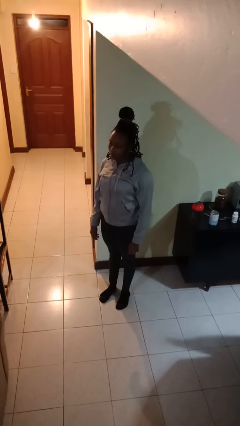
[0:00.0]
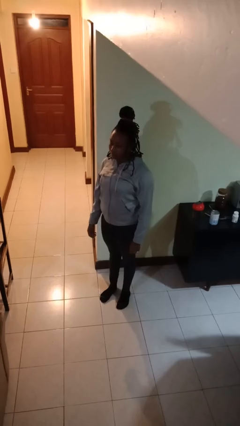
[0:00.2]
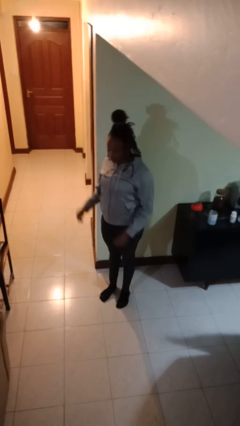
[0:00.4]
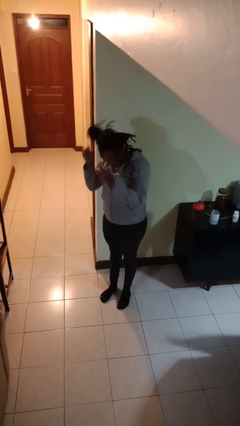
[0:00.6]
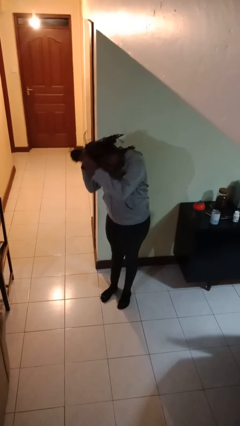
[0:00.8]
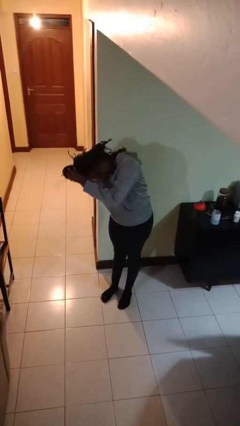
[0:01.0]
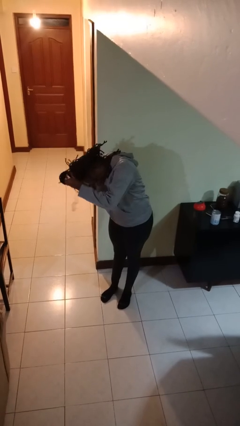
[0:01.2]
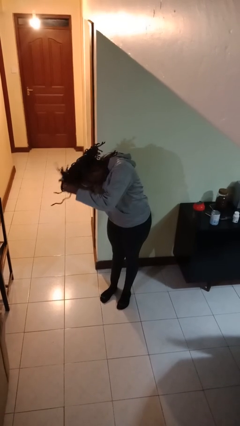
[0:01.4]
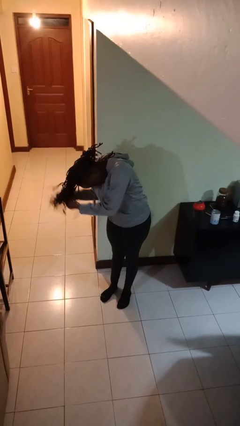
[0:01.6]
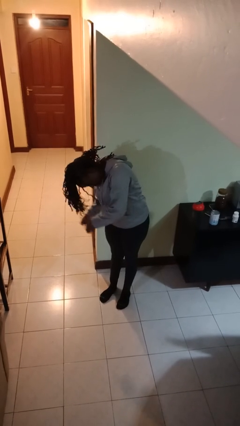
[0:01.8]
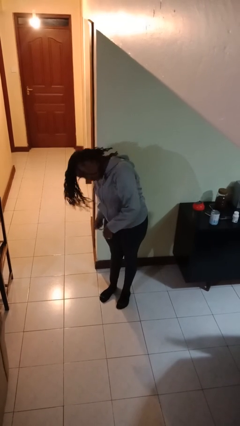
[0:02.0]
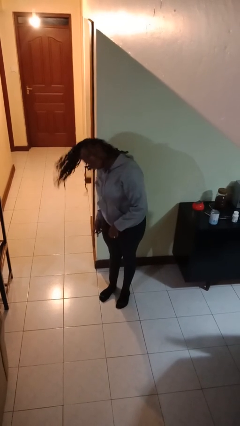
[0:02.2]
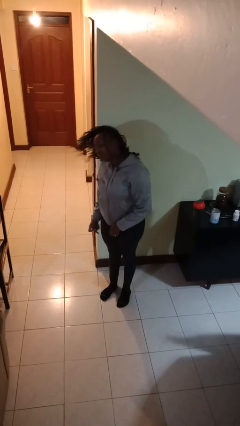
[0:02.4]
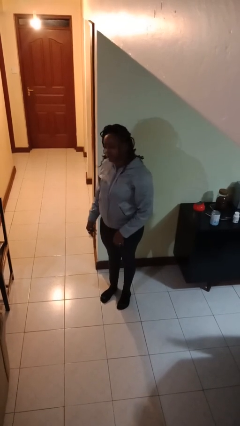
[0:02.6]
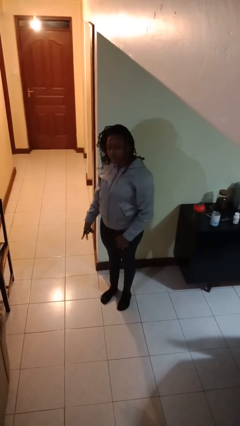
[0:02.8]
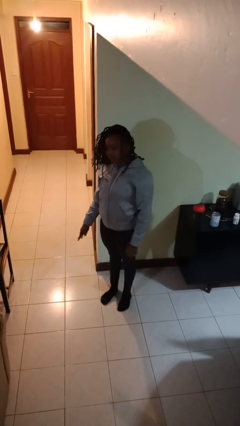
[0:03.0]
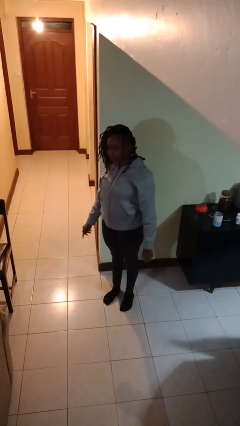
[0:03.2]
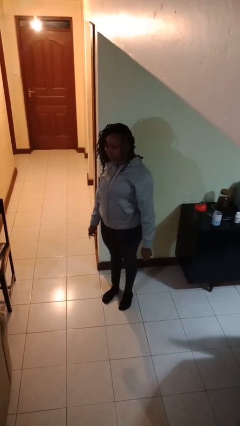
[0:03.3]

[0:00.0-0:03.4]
person takes off hairtie

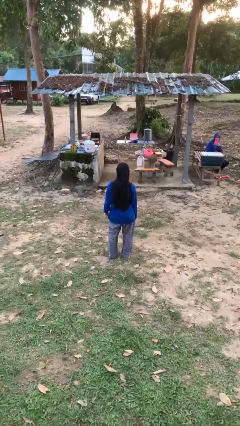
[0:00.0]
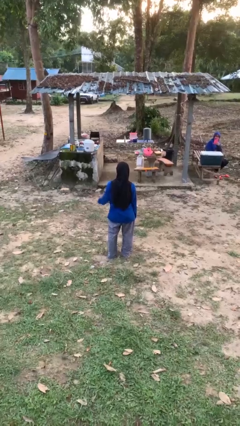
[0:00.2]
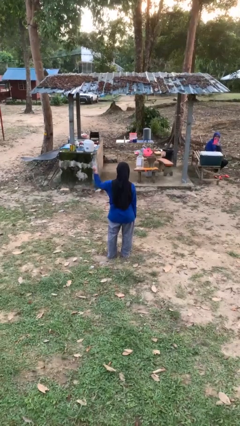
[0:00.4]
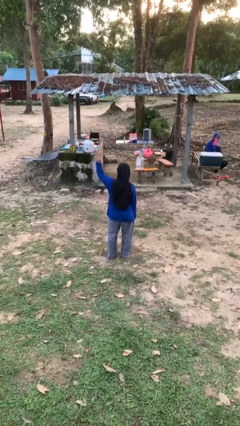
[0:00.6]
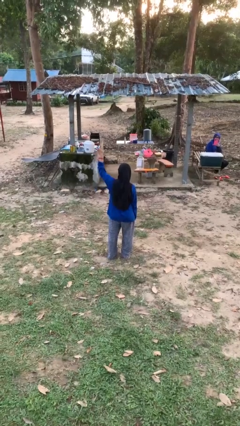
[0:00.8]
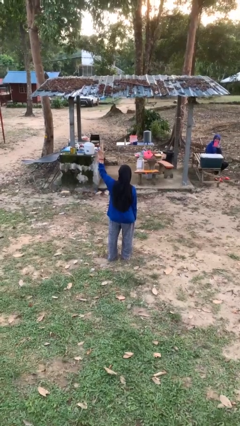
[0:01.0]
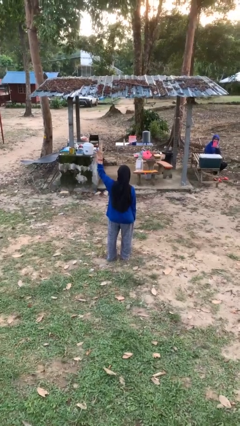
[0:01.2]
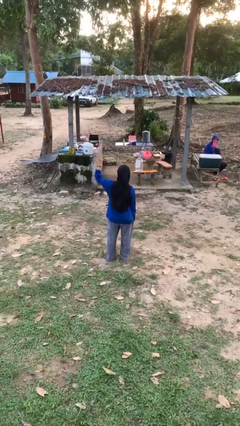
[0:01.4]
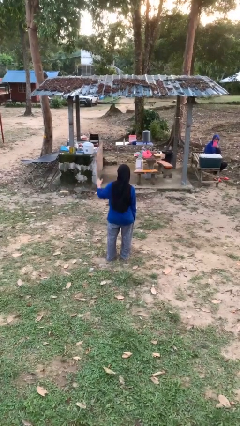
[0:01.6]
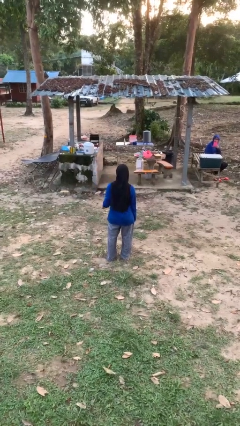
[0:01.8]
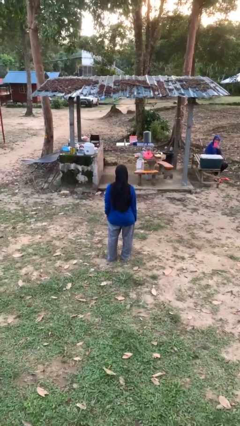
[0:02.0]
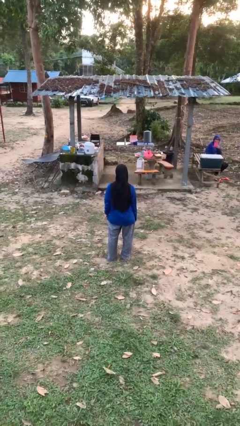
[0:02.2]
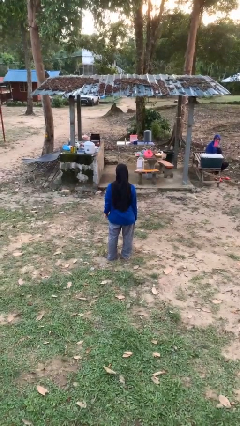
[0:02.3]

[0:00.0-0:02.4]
person gestures number five

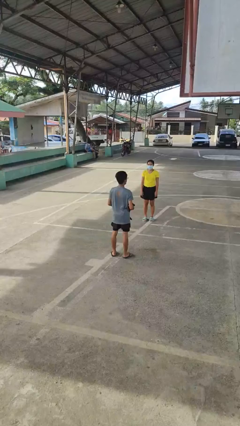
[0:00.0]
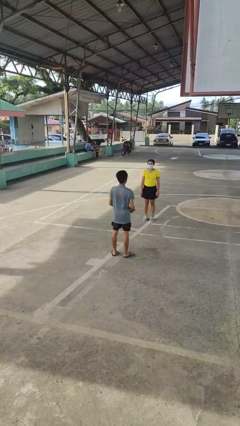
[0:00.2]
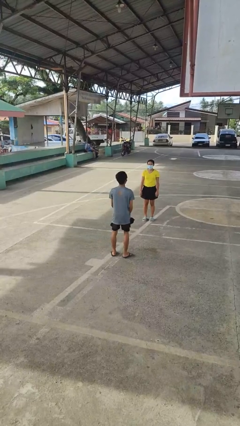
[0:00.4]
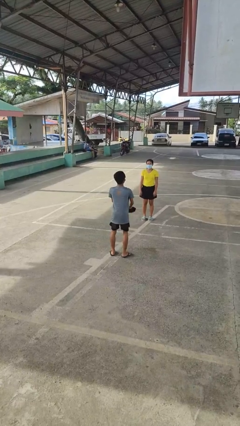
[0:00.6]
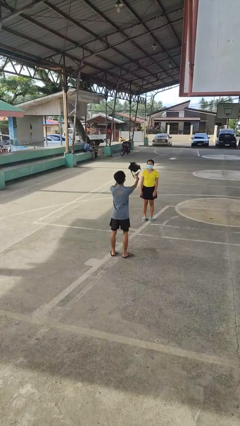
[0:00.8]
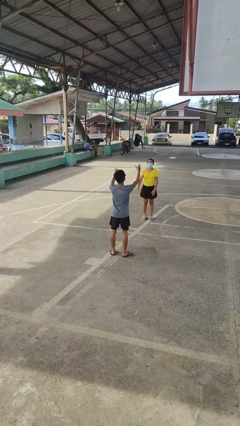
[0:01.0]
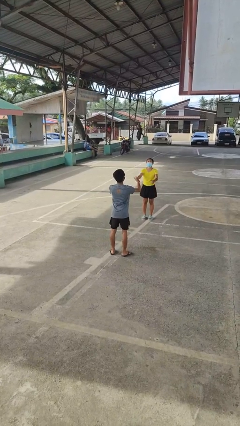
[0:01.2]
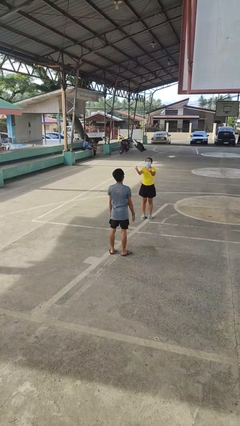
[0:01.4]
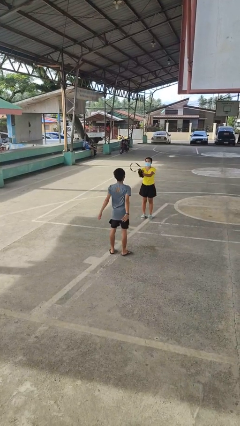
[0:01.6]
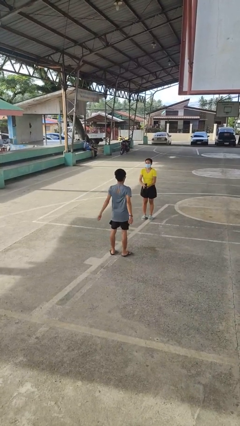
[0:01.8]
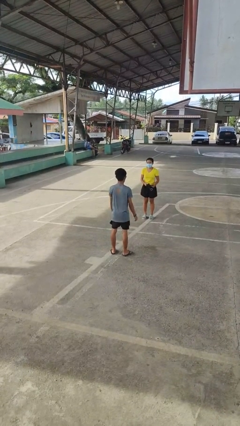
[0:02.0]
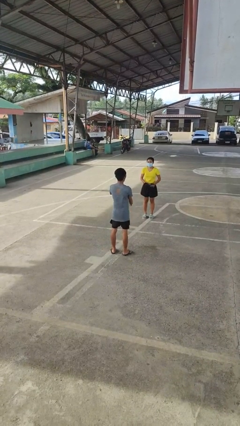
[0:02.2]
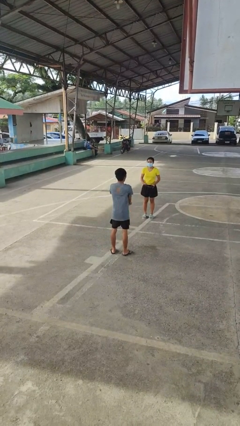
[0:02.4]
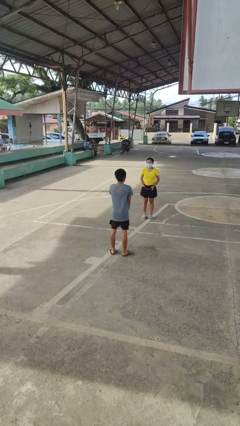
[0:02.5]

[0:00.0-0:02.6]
person throws object to person

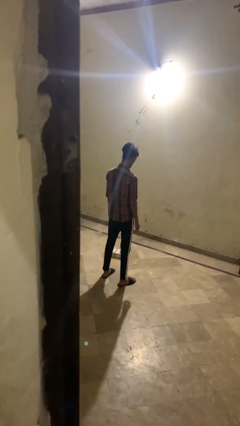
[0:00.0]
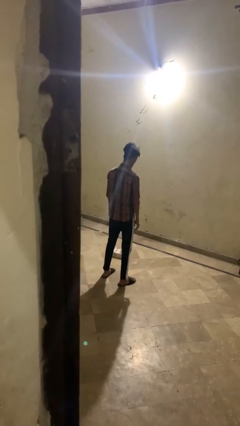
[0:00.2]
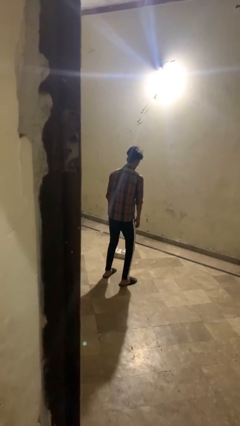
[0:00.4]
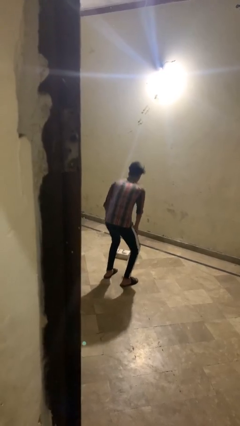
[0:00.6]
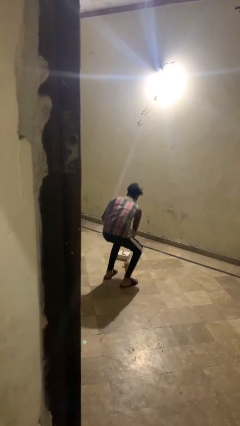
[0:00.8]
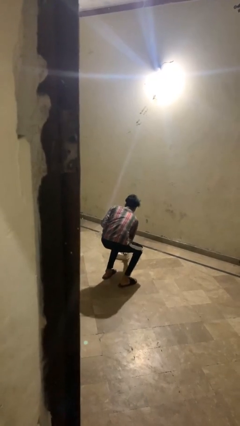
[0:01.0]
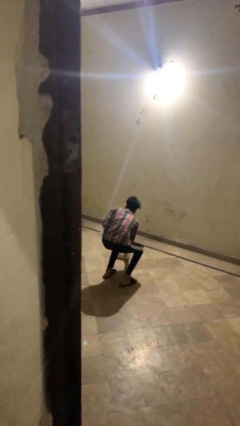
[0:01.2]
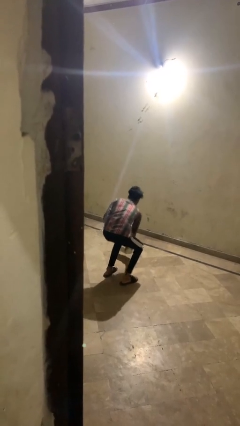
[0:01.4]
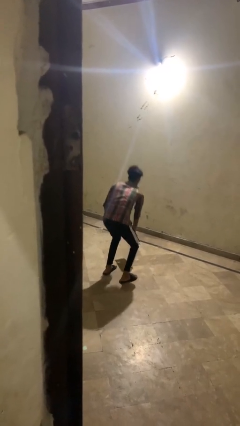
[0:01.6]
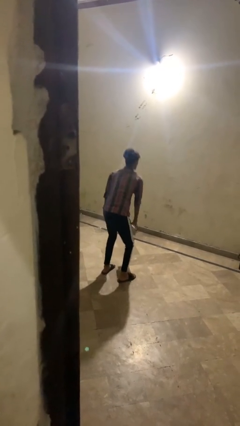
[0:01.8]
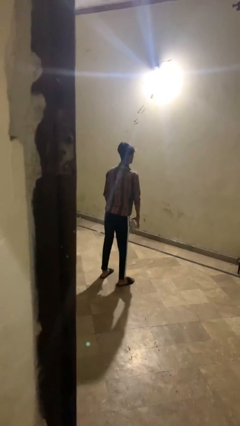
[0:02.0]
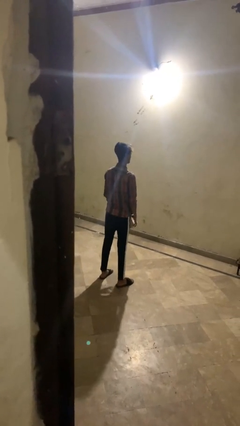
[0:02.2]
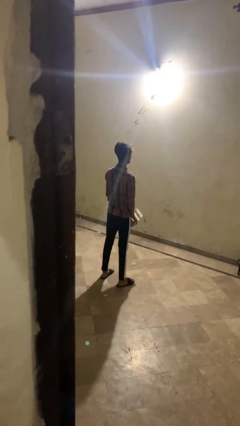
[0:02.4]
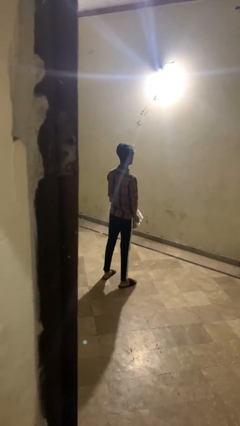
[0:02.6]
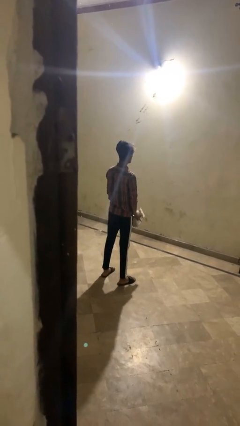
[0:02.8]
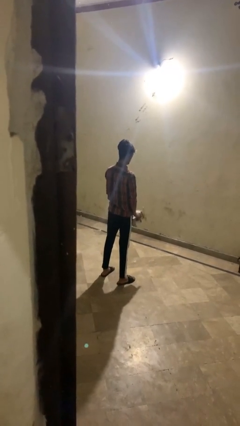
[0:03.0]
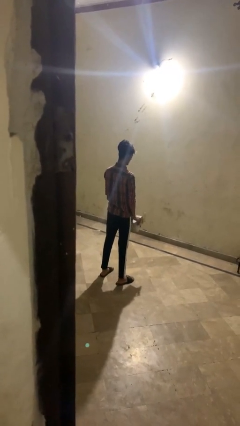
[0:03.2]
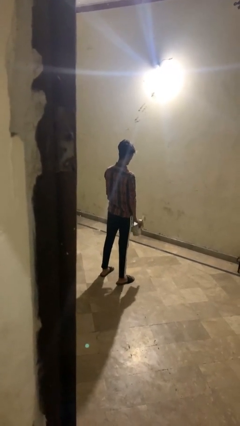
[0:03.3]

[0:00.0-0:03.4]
person picks up object from floor

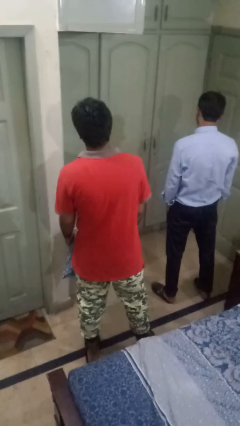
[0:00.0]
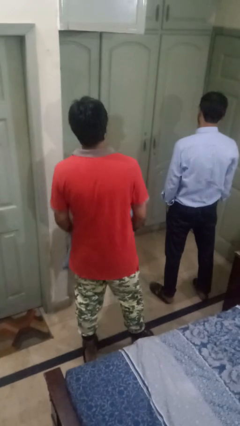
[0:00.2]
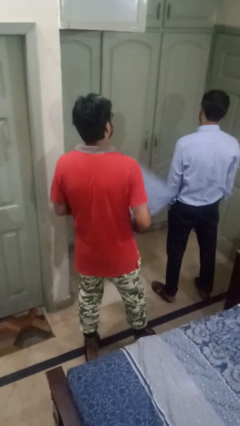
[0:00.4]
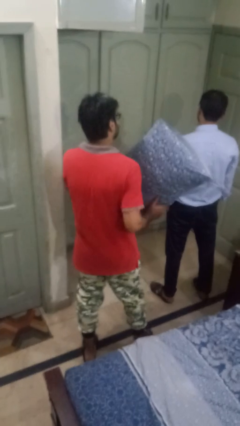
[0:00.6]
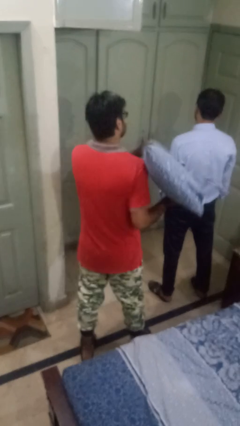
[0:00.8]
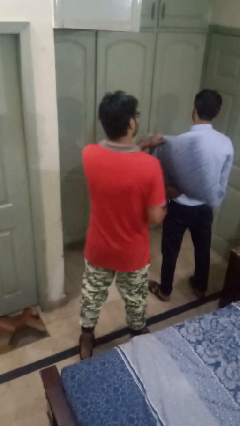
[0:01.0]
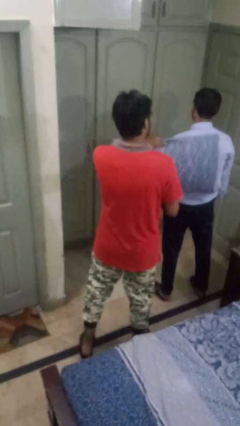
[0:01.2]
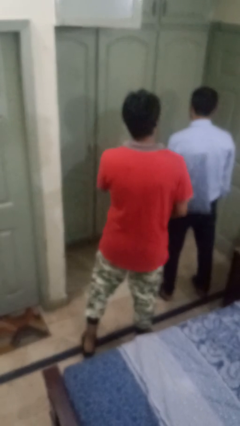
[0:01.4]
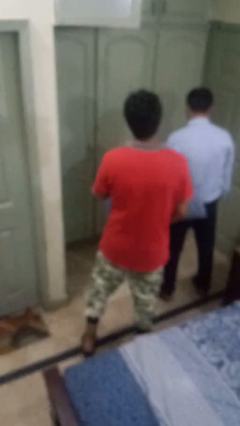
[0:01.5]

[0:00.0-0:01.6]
person hits person with pillow

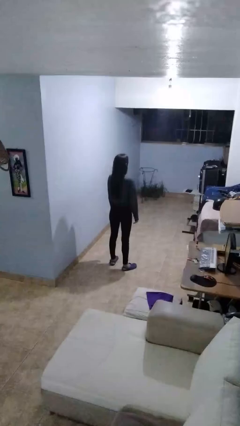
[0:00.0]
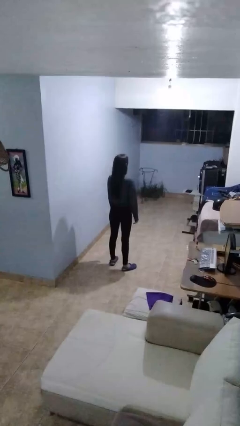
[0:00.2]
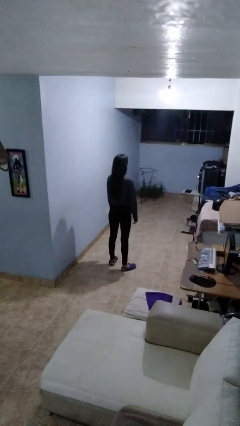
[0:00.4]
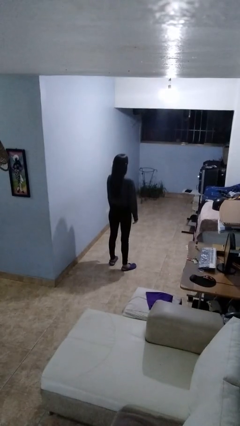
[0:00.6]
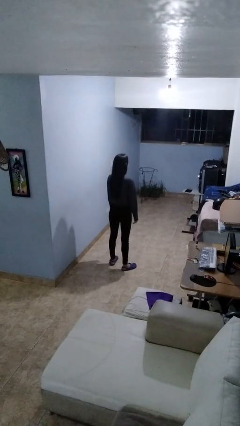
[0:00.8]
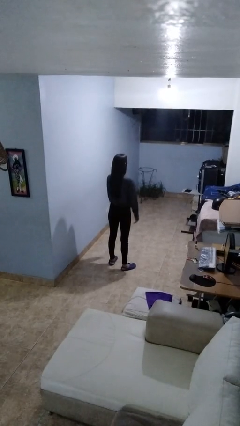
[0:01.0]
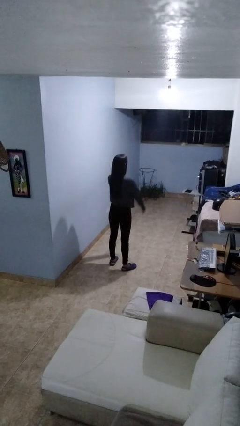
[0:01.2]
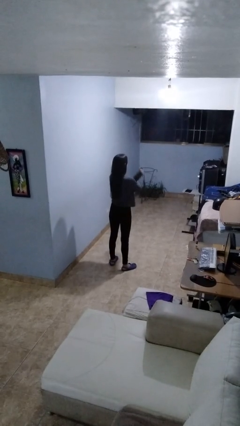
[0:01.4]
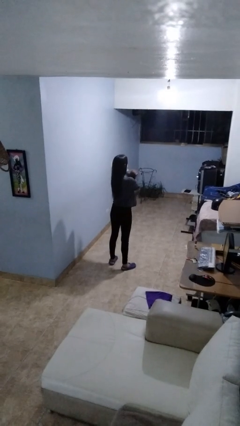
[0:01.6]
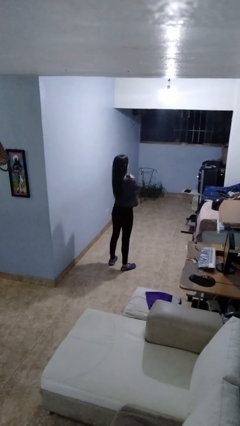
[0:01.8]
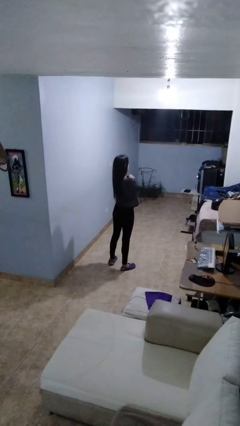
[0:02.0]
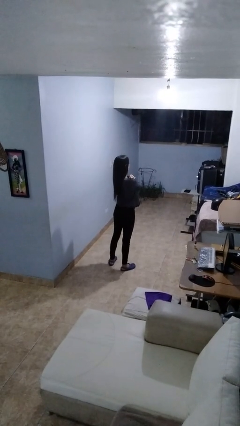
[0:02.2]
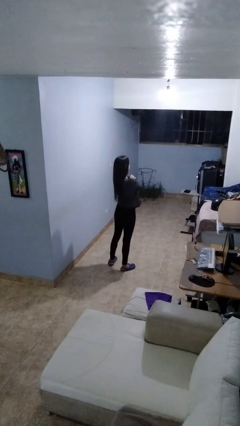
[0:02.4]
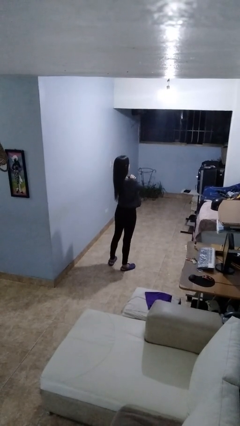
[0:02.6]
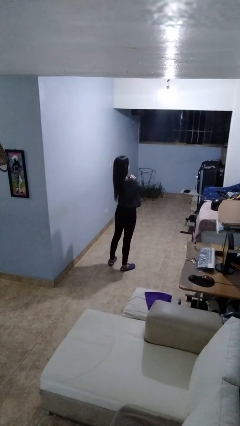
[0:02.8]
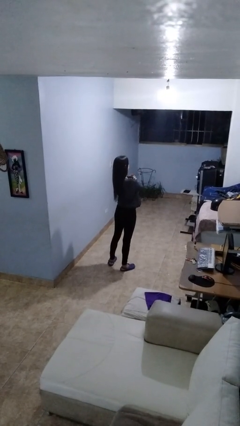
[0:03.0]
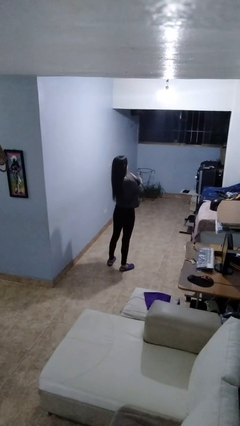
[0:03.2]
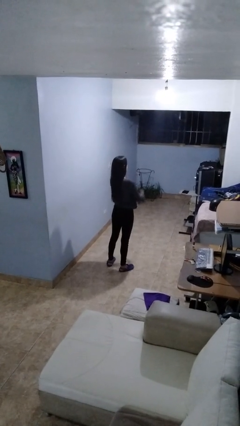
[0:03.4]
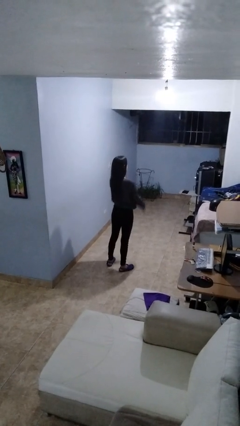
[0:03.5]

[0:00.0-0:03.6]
person gestures arms x

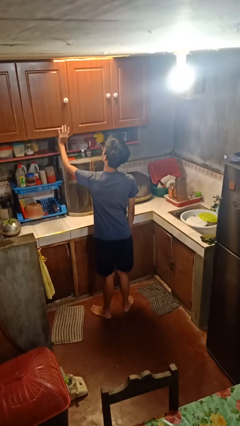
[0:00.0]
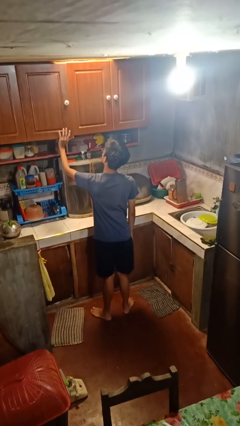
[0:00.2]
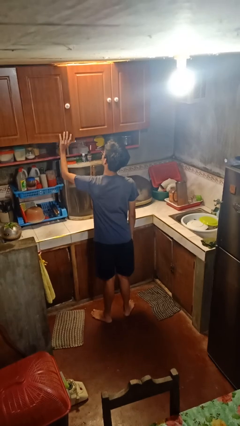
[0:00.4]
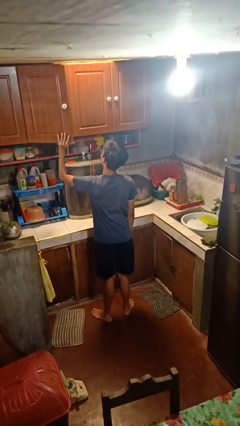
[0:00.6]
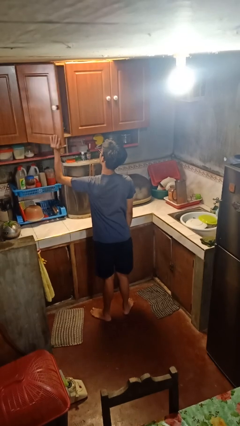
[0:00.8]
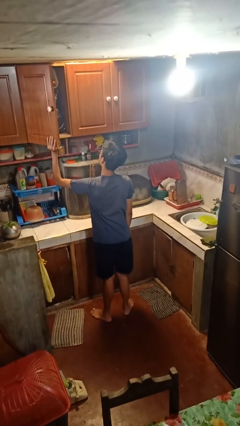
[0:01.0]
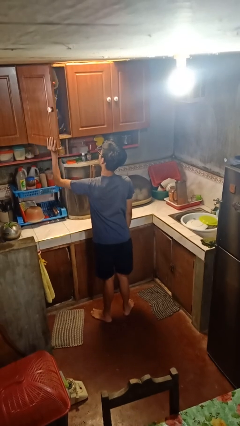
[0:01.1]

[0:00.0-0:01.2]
person opens cabinet
